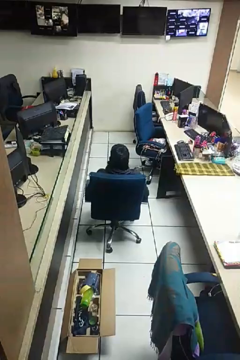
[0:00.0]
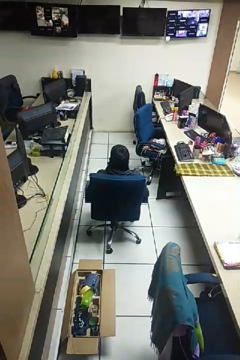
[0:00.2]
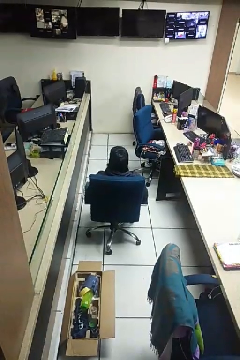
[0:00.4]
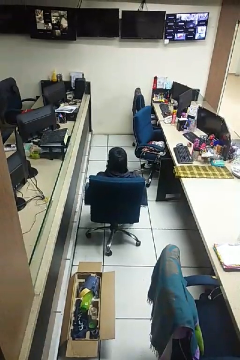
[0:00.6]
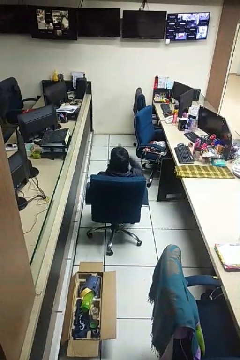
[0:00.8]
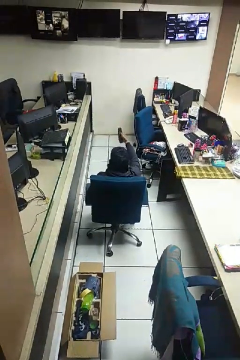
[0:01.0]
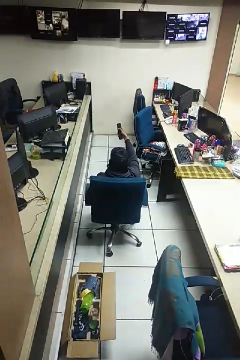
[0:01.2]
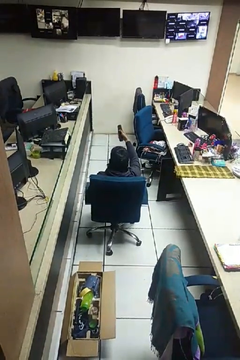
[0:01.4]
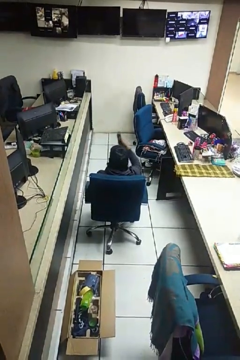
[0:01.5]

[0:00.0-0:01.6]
person uses television remote

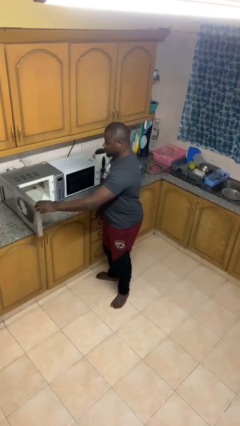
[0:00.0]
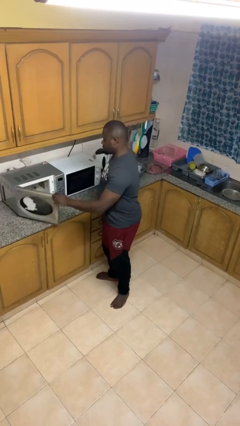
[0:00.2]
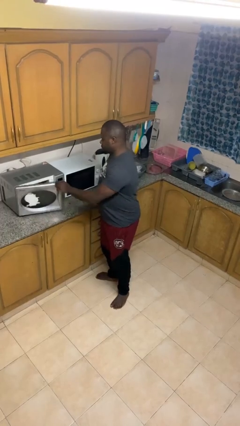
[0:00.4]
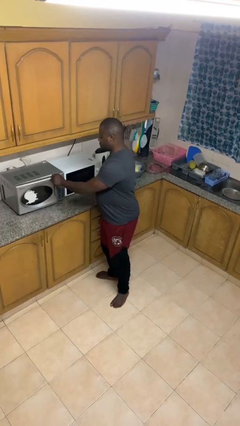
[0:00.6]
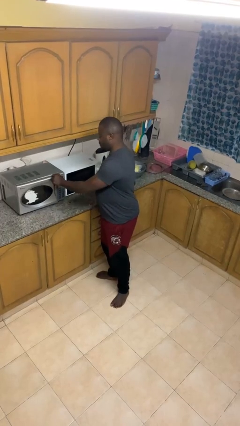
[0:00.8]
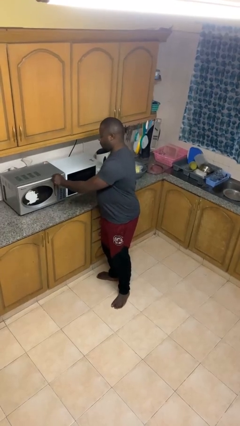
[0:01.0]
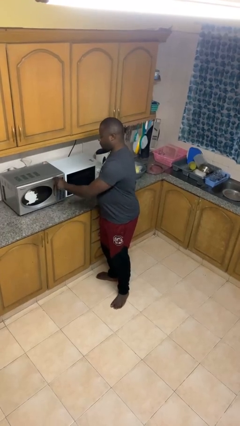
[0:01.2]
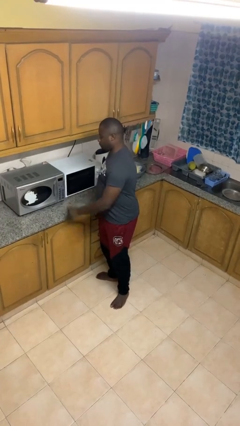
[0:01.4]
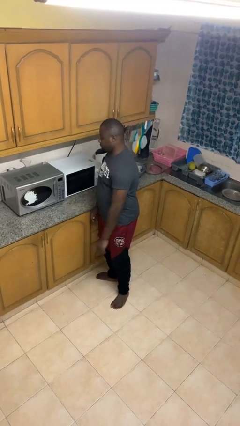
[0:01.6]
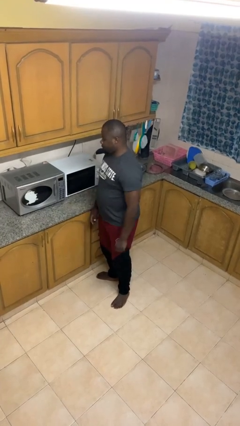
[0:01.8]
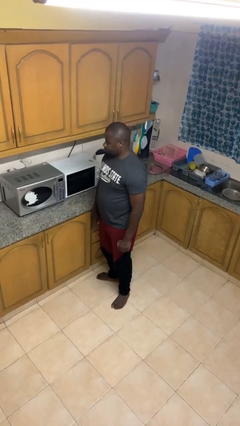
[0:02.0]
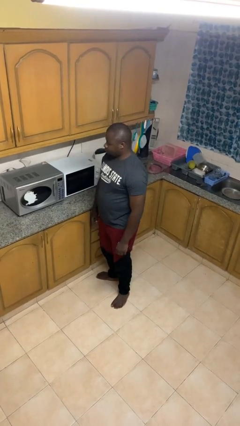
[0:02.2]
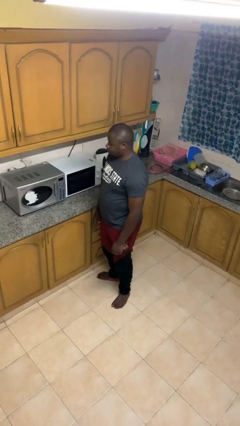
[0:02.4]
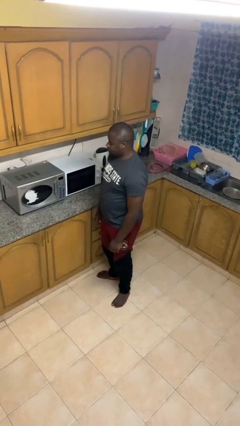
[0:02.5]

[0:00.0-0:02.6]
person closes microwave

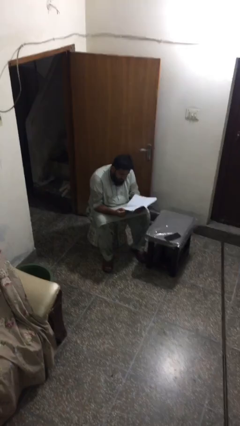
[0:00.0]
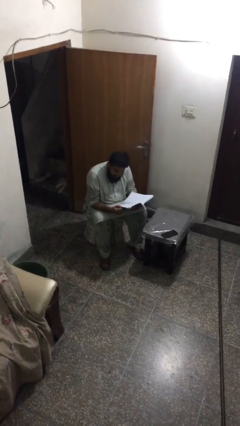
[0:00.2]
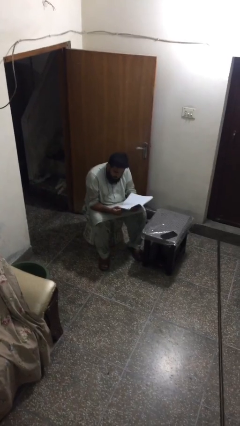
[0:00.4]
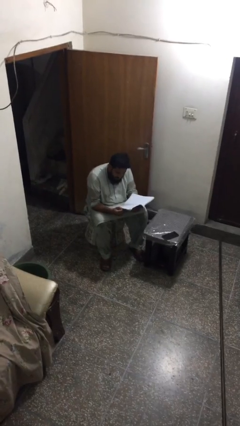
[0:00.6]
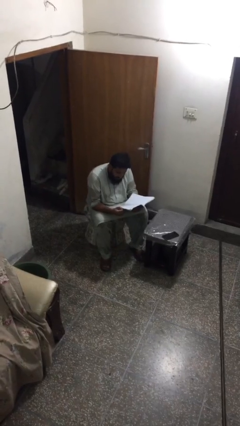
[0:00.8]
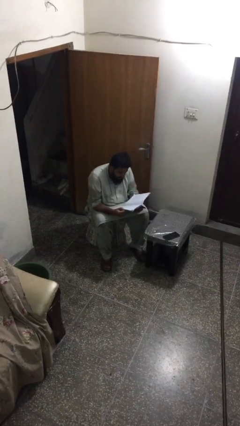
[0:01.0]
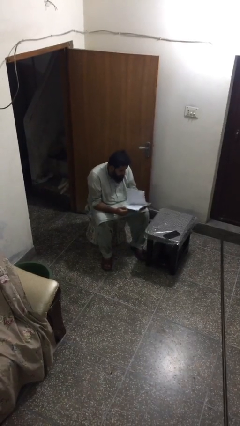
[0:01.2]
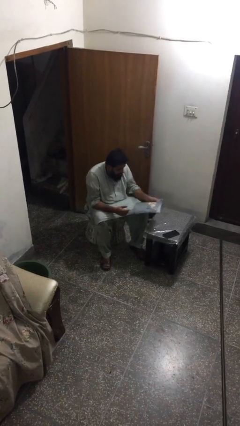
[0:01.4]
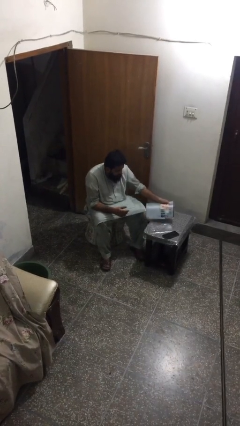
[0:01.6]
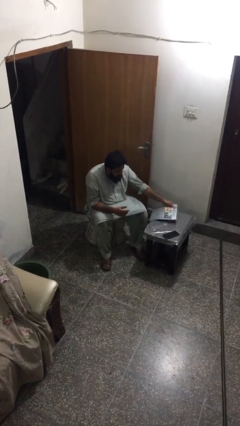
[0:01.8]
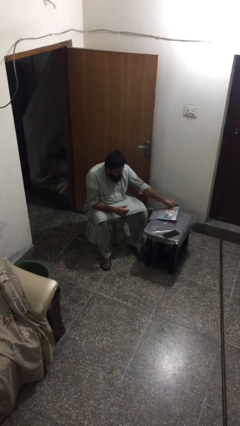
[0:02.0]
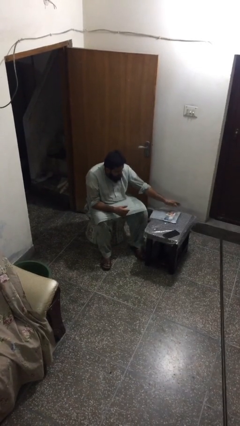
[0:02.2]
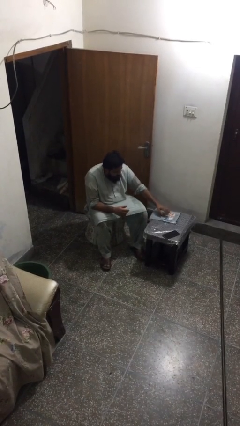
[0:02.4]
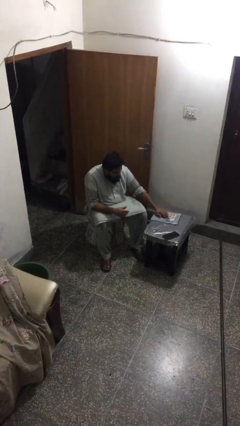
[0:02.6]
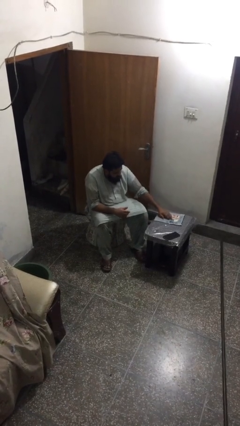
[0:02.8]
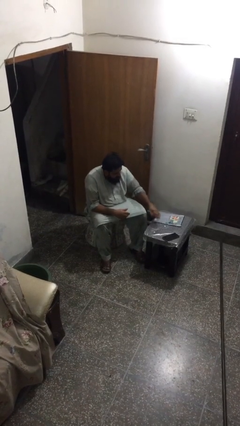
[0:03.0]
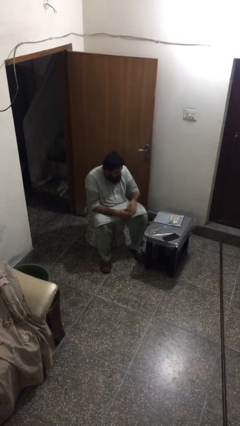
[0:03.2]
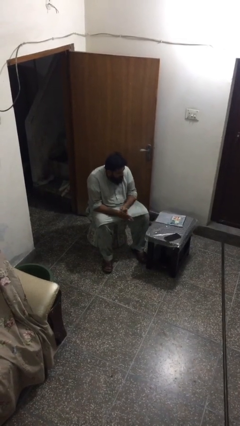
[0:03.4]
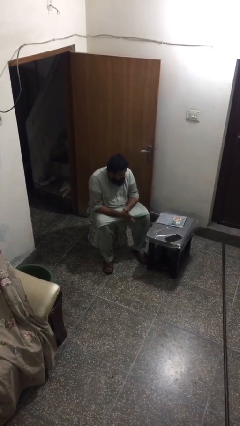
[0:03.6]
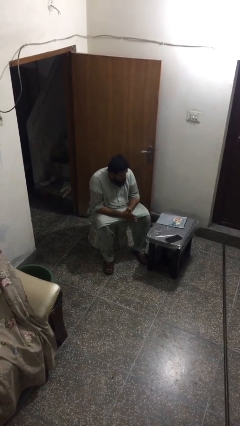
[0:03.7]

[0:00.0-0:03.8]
person puts down object on table

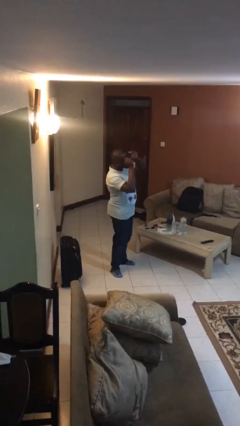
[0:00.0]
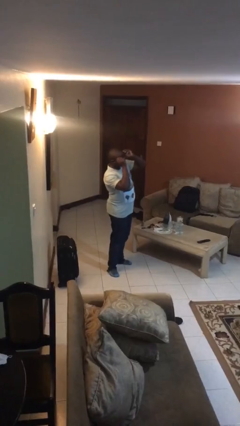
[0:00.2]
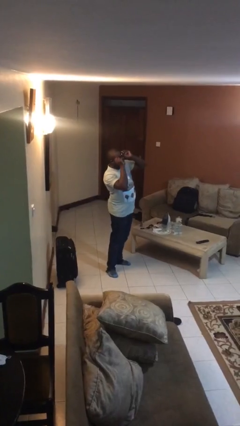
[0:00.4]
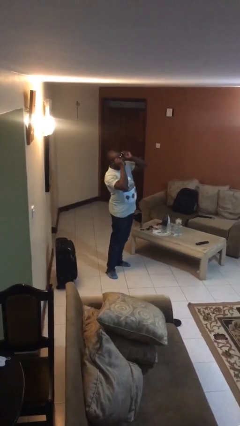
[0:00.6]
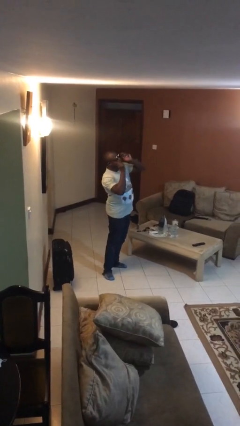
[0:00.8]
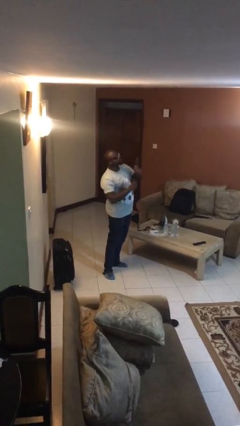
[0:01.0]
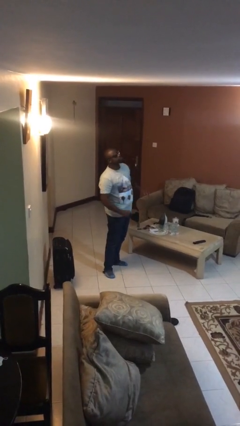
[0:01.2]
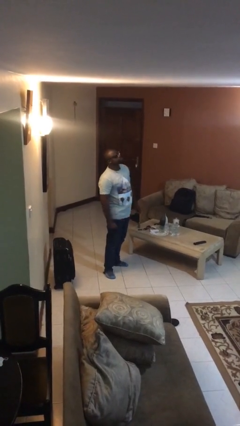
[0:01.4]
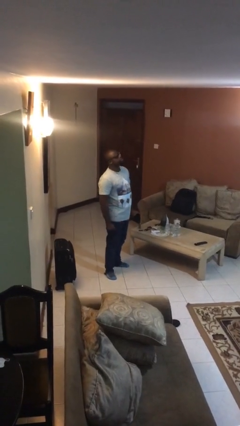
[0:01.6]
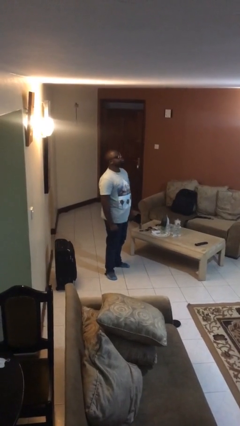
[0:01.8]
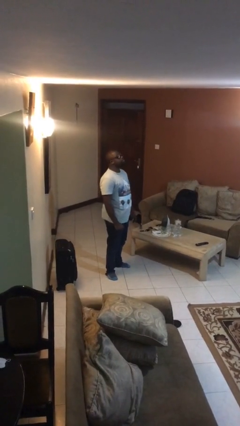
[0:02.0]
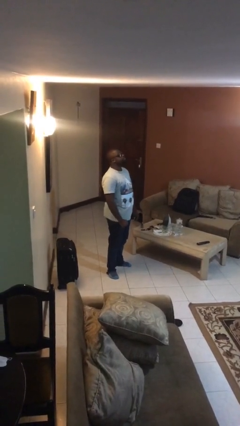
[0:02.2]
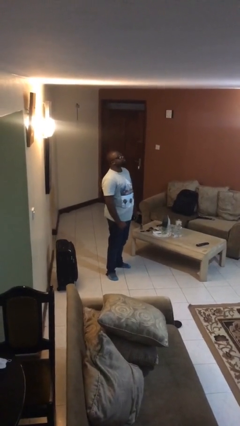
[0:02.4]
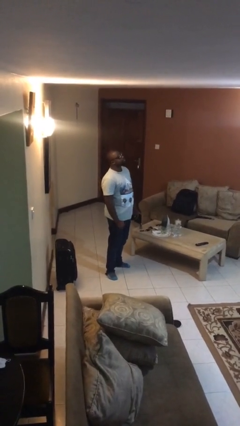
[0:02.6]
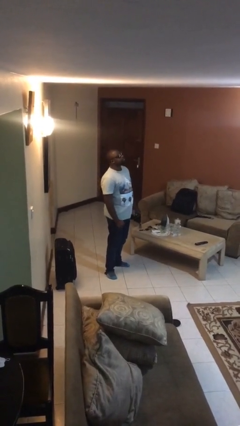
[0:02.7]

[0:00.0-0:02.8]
person puts on sunglasses

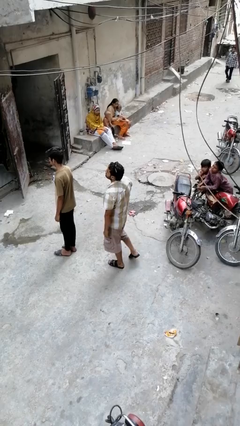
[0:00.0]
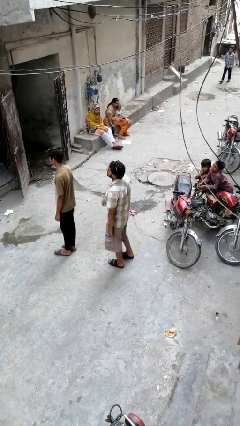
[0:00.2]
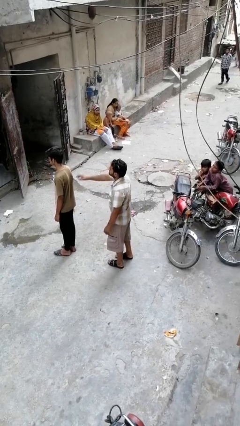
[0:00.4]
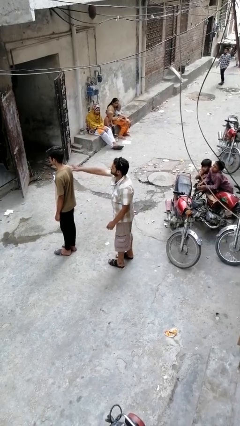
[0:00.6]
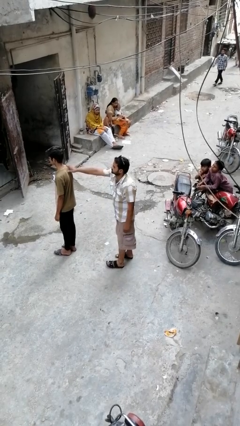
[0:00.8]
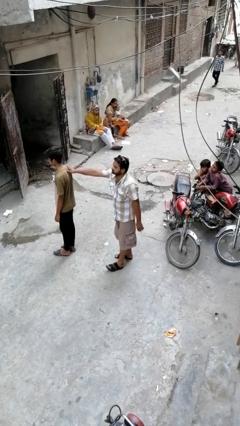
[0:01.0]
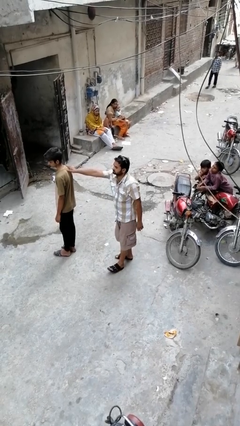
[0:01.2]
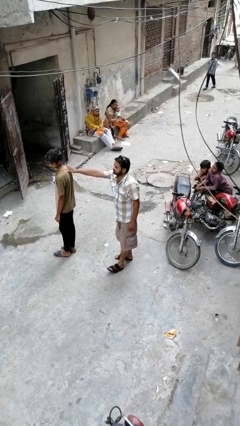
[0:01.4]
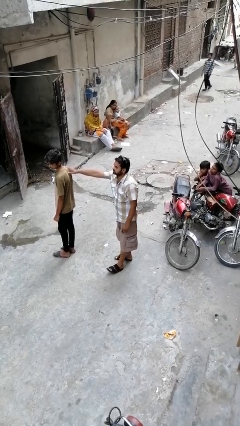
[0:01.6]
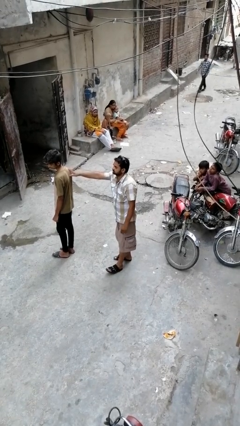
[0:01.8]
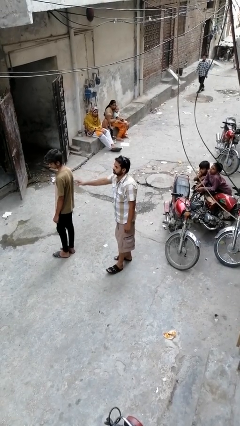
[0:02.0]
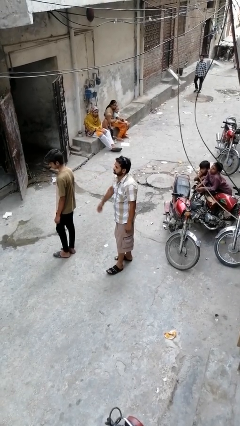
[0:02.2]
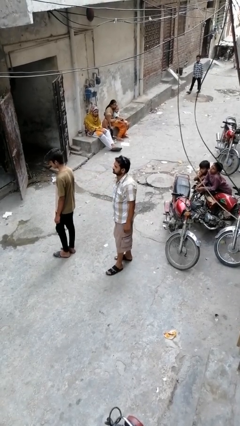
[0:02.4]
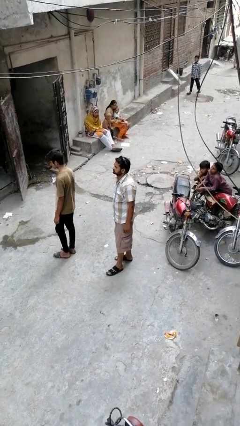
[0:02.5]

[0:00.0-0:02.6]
person touches back of person

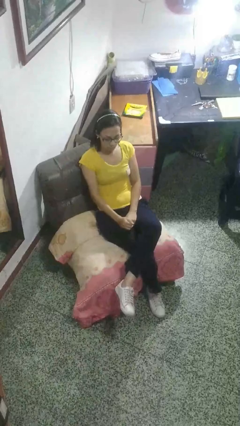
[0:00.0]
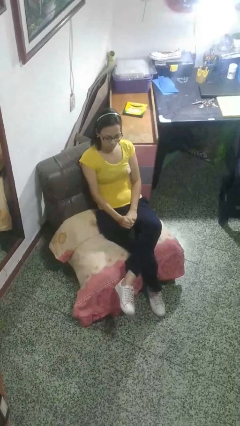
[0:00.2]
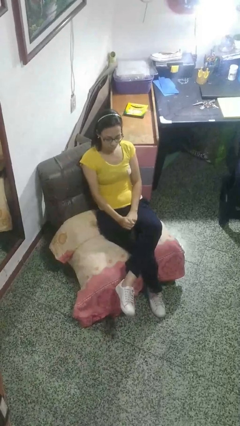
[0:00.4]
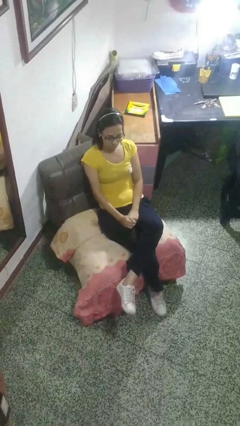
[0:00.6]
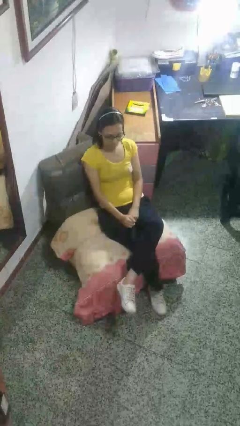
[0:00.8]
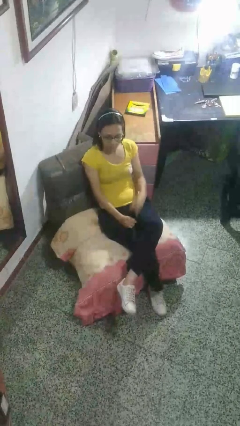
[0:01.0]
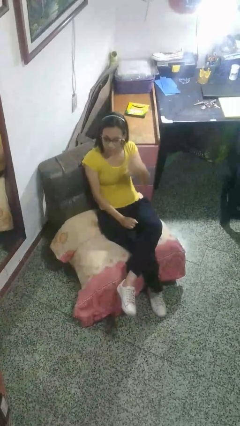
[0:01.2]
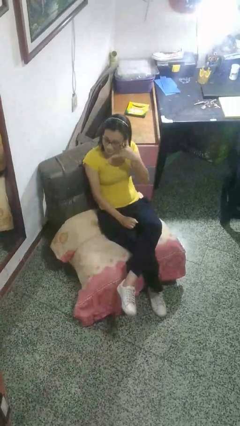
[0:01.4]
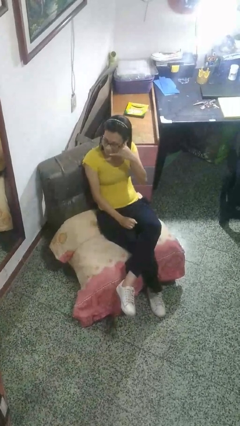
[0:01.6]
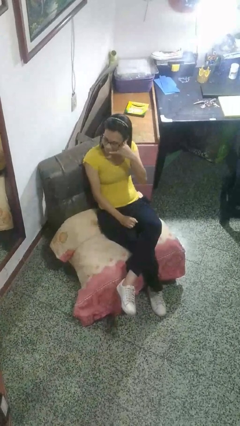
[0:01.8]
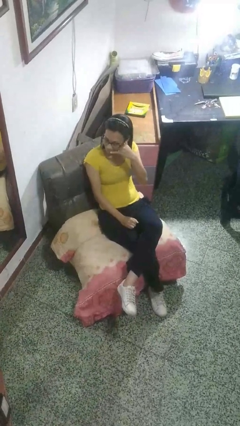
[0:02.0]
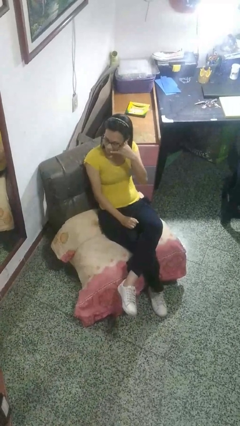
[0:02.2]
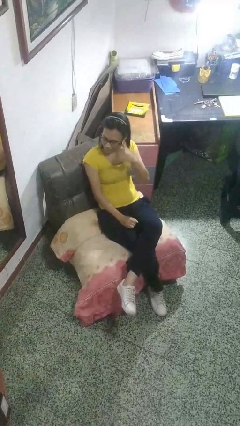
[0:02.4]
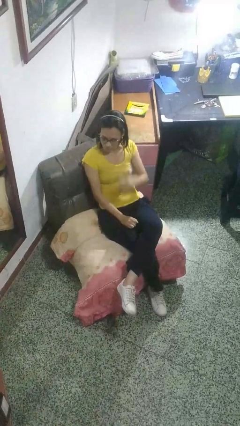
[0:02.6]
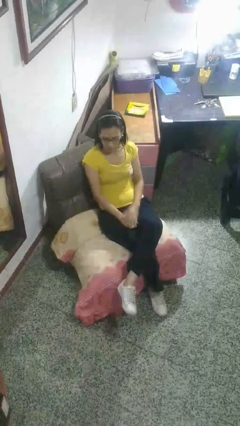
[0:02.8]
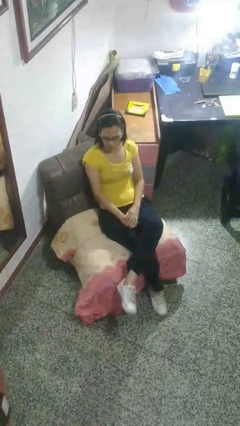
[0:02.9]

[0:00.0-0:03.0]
person gestures call me

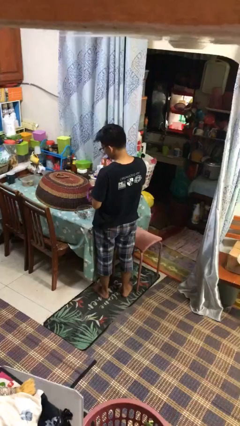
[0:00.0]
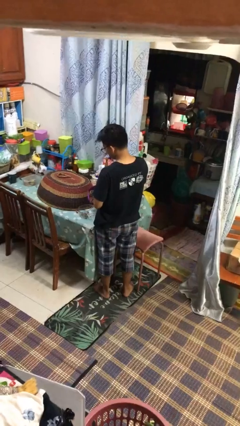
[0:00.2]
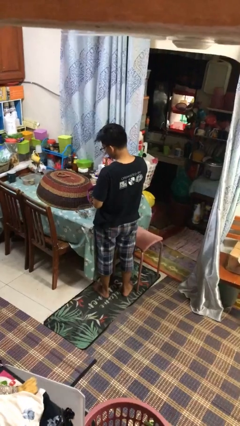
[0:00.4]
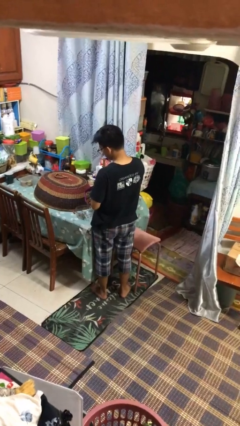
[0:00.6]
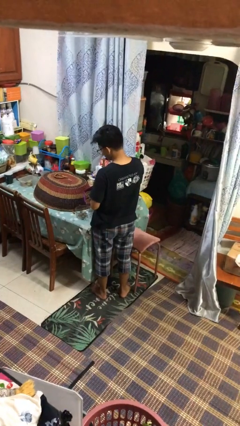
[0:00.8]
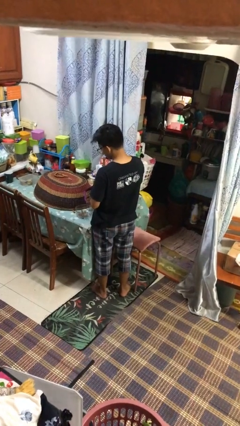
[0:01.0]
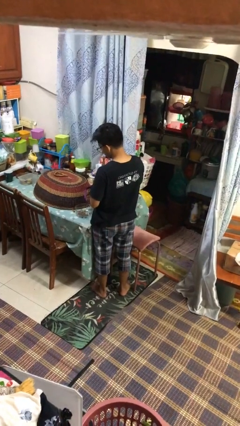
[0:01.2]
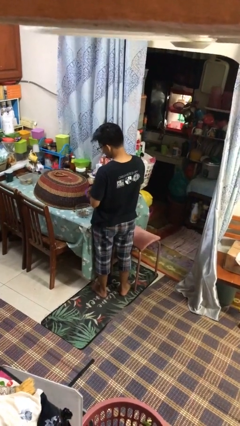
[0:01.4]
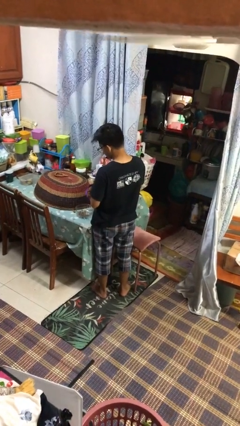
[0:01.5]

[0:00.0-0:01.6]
person pours into bowl
